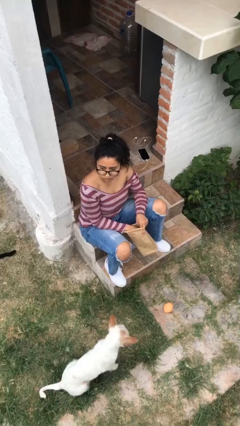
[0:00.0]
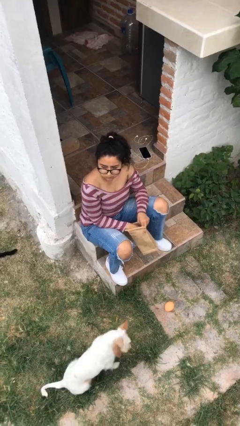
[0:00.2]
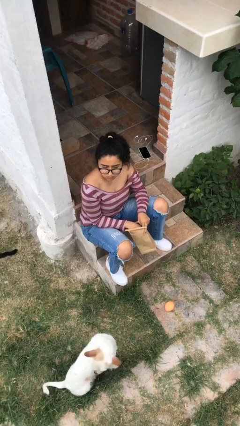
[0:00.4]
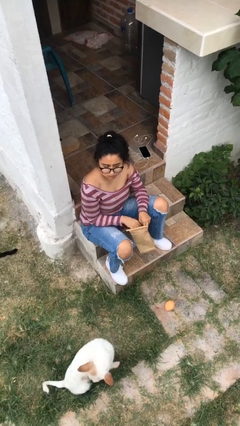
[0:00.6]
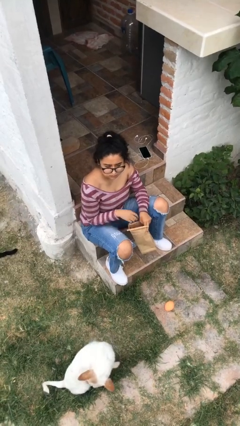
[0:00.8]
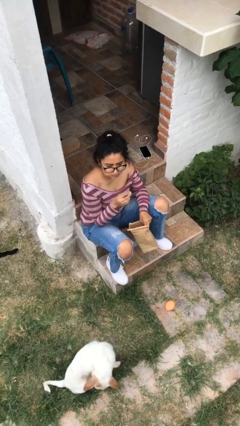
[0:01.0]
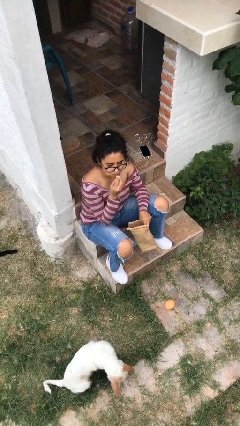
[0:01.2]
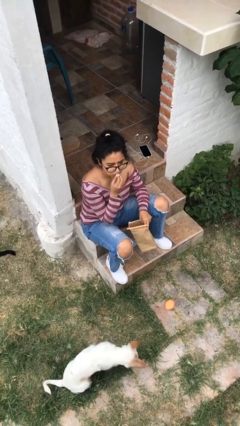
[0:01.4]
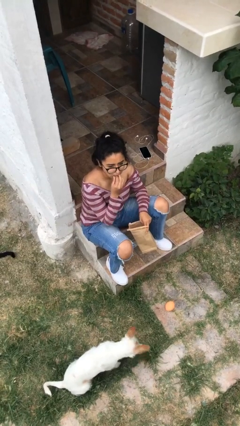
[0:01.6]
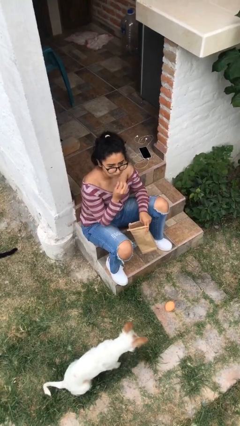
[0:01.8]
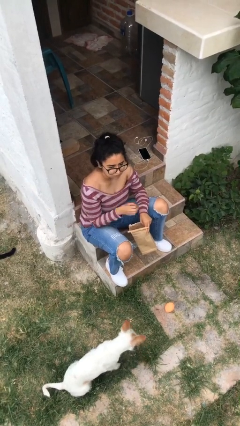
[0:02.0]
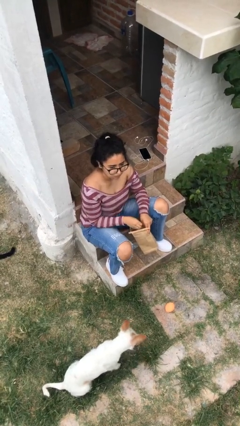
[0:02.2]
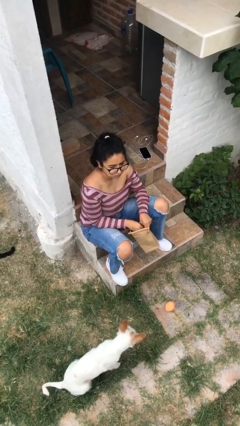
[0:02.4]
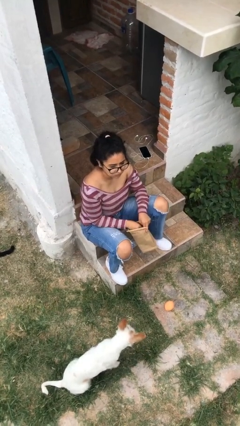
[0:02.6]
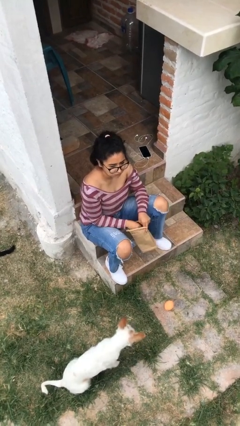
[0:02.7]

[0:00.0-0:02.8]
person eats snack from bag

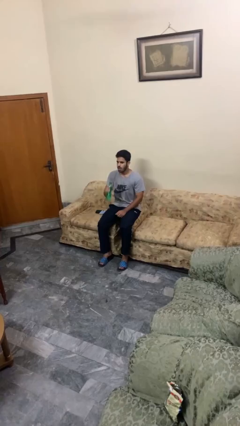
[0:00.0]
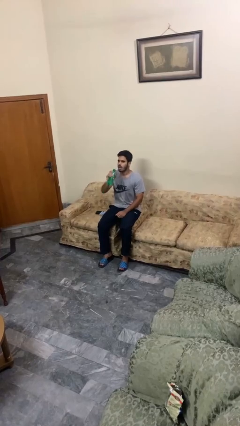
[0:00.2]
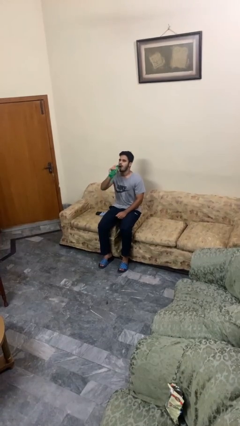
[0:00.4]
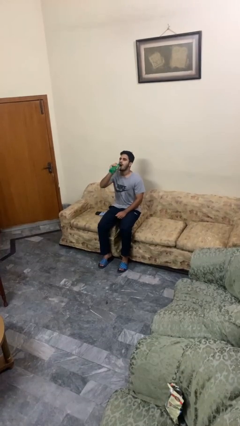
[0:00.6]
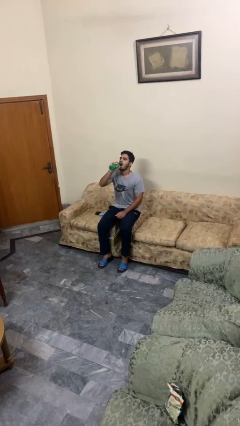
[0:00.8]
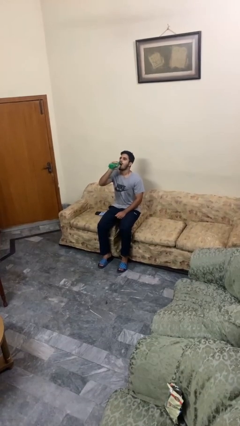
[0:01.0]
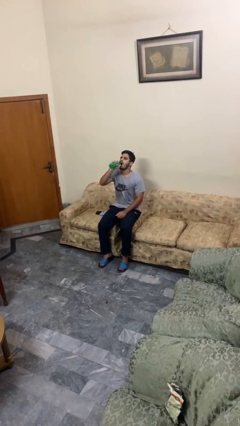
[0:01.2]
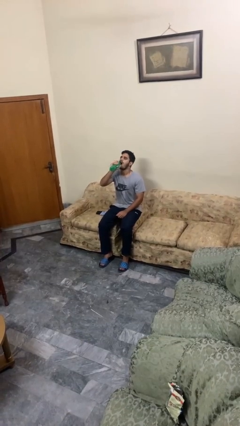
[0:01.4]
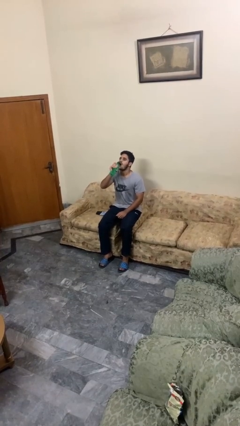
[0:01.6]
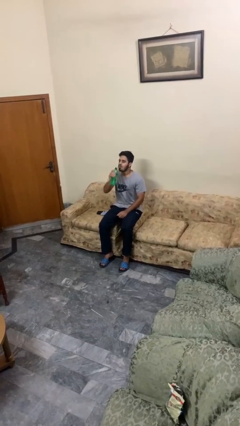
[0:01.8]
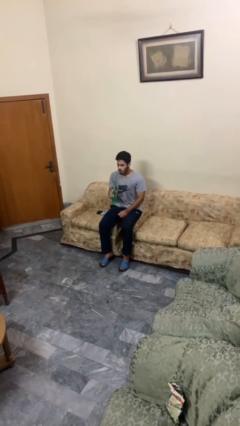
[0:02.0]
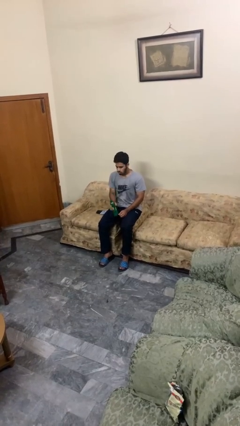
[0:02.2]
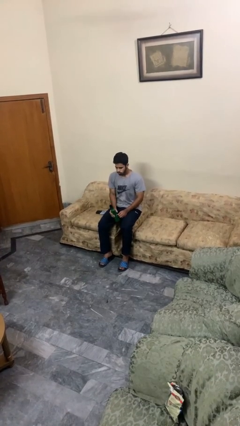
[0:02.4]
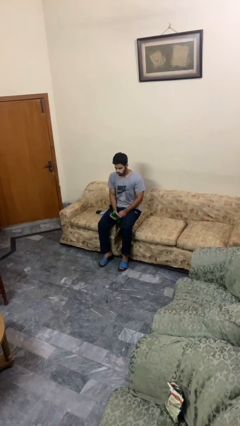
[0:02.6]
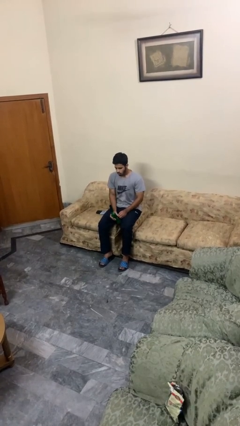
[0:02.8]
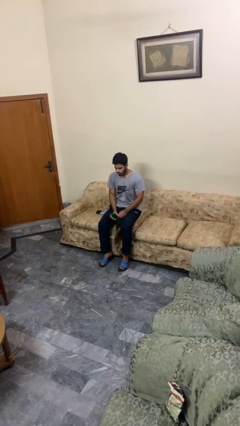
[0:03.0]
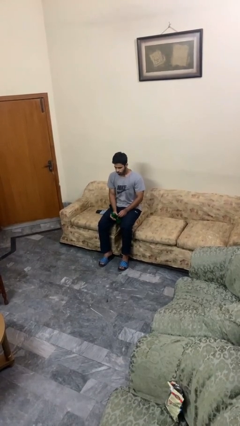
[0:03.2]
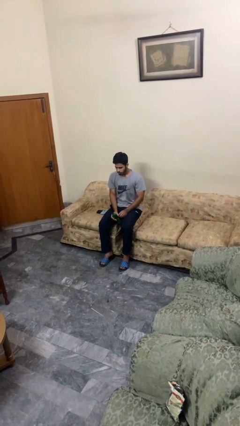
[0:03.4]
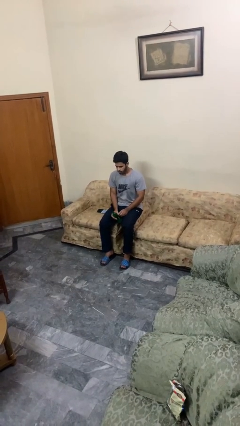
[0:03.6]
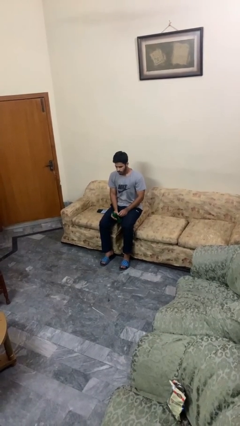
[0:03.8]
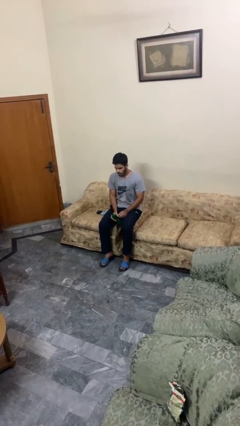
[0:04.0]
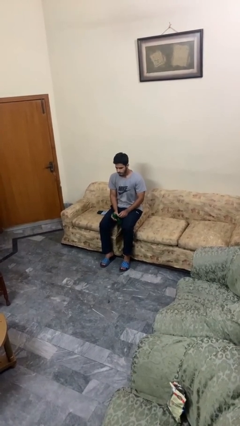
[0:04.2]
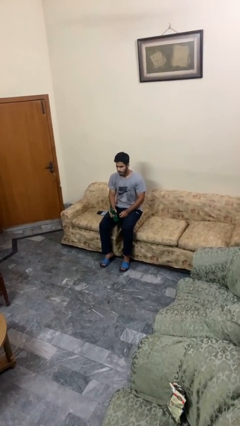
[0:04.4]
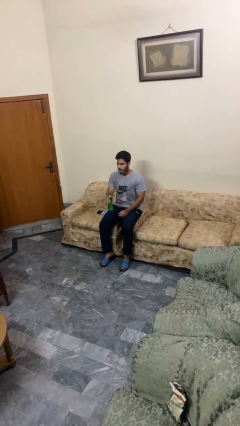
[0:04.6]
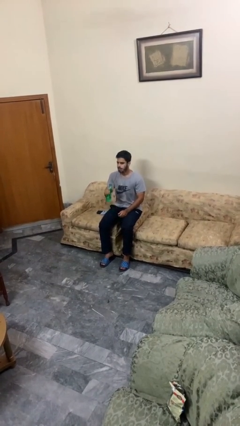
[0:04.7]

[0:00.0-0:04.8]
person drinks from bottle

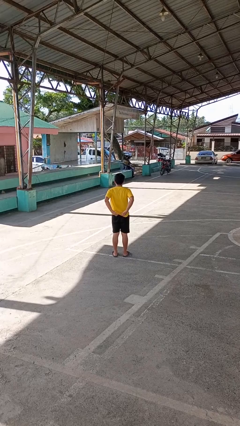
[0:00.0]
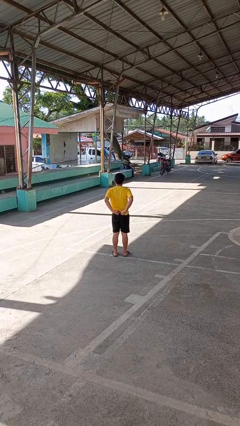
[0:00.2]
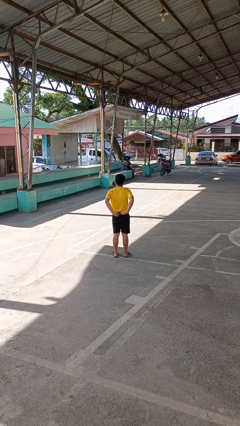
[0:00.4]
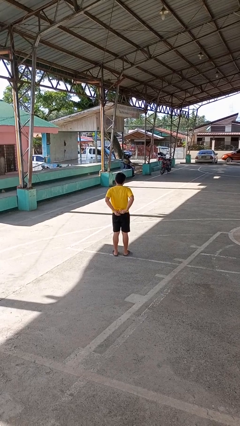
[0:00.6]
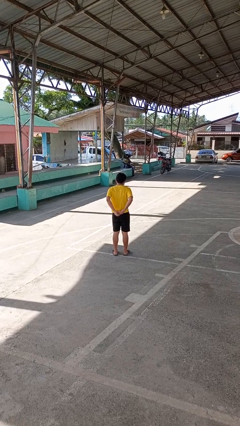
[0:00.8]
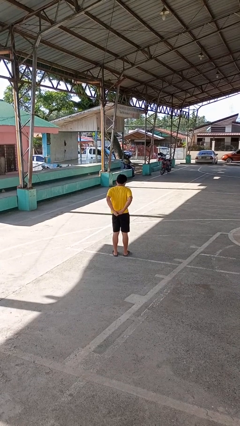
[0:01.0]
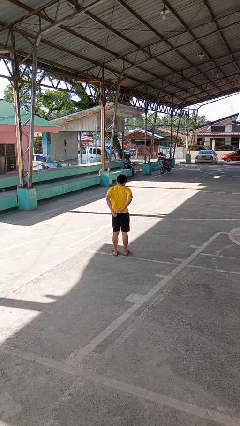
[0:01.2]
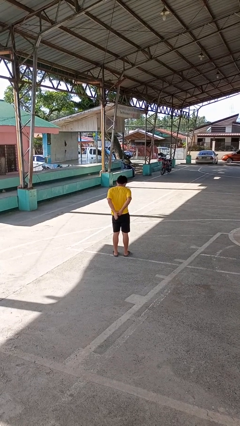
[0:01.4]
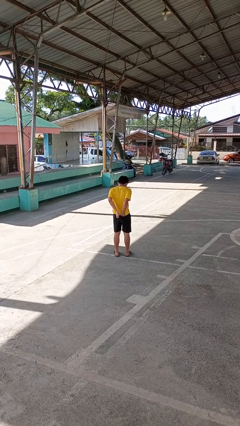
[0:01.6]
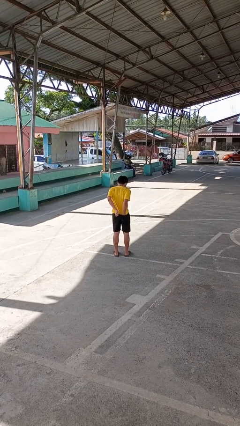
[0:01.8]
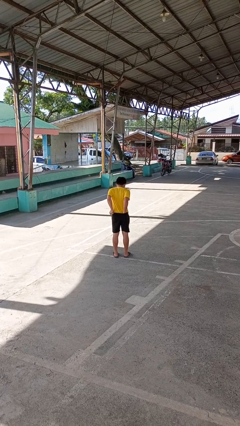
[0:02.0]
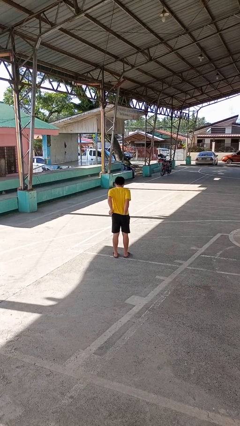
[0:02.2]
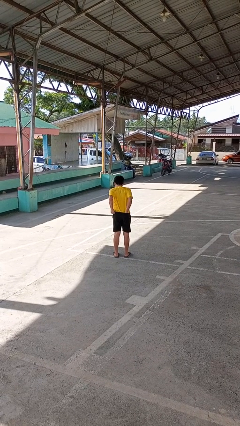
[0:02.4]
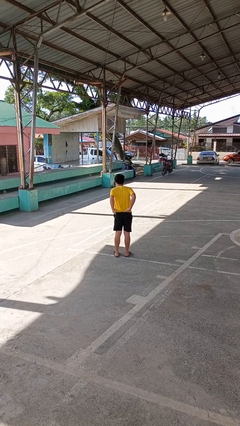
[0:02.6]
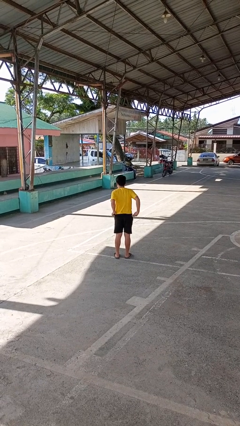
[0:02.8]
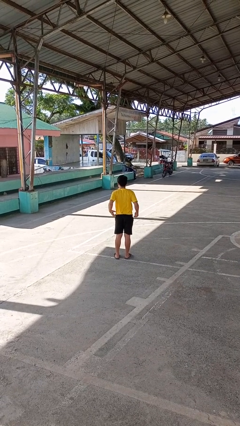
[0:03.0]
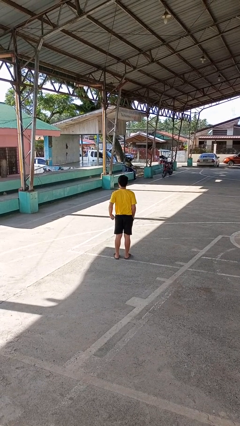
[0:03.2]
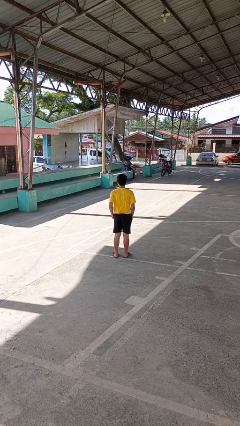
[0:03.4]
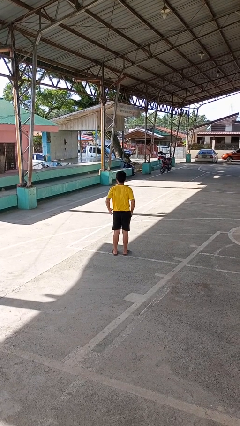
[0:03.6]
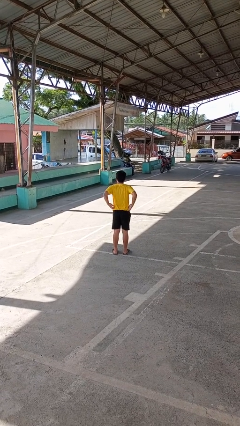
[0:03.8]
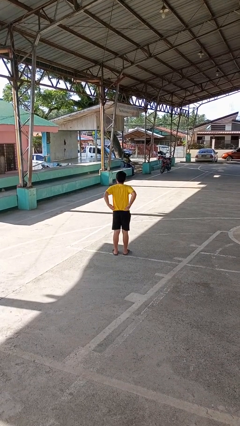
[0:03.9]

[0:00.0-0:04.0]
person tucks in shirt

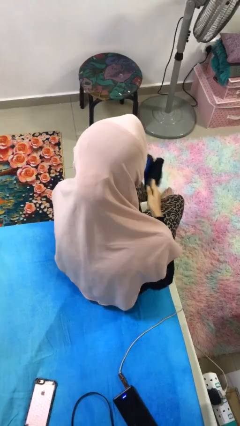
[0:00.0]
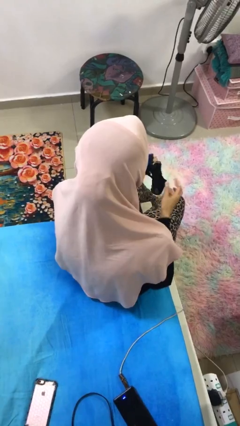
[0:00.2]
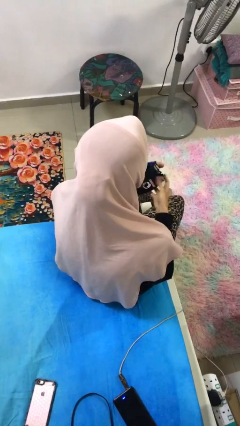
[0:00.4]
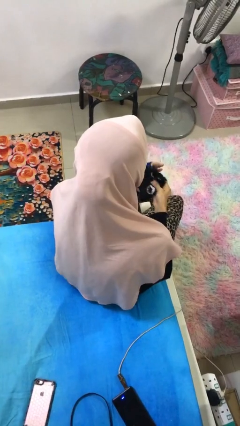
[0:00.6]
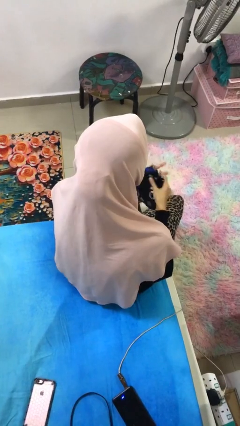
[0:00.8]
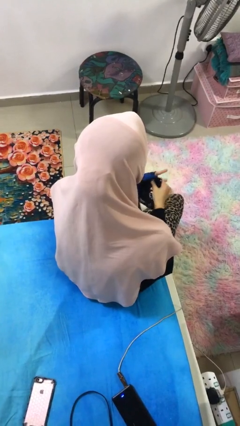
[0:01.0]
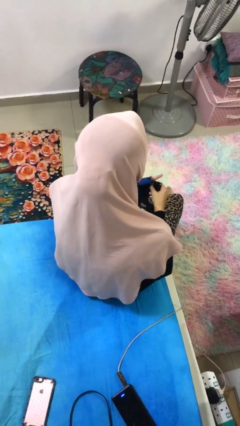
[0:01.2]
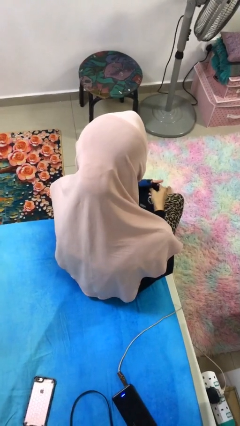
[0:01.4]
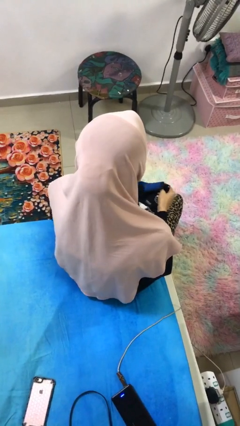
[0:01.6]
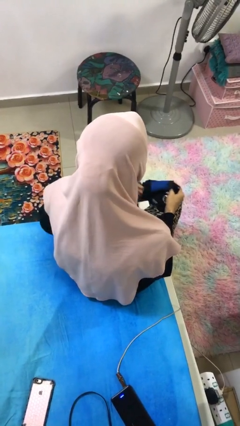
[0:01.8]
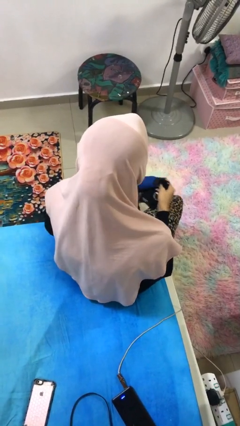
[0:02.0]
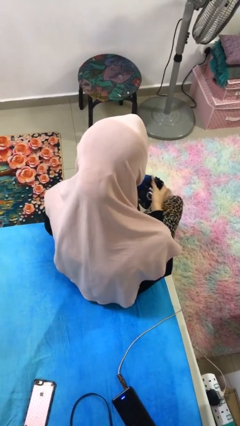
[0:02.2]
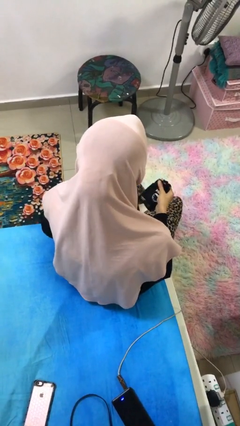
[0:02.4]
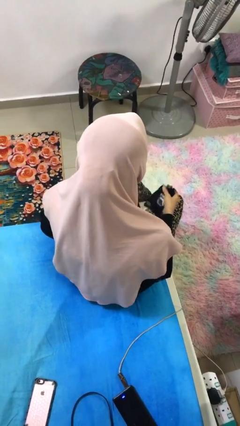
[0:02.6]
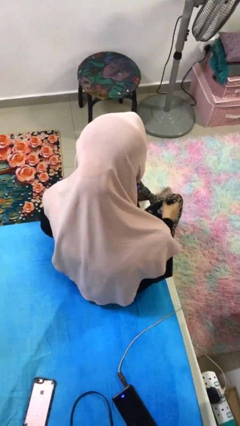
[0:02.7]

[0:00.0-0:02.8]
person takes off gloves

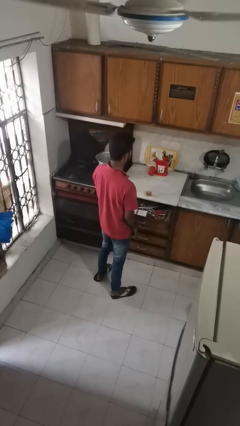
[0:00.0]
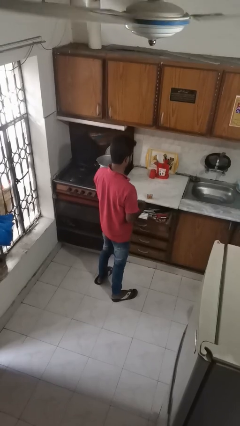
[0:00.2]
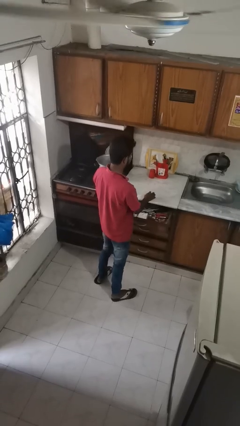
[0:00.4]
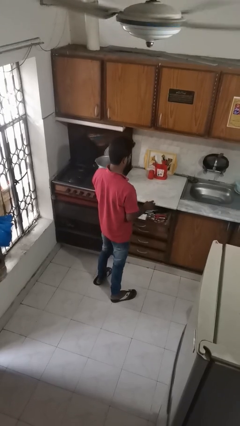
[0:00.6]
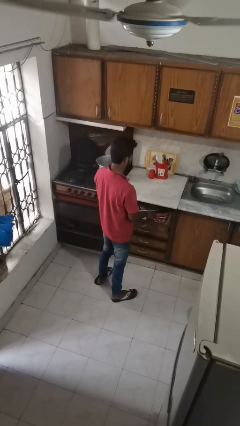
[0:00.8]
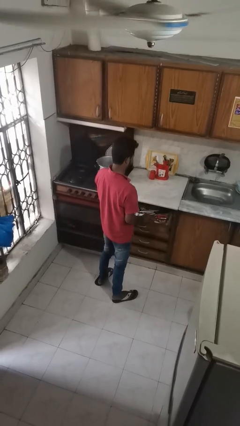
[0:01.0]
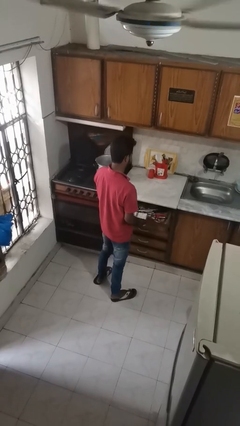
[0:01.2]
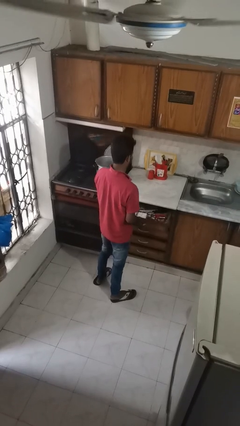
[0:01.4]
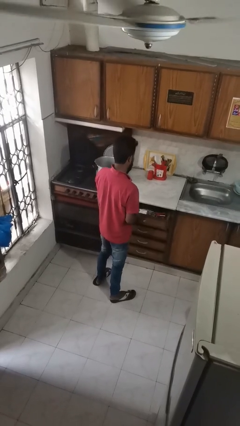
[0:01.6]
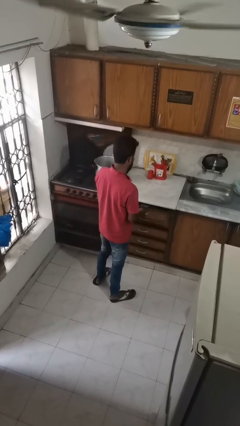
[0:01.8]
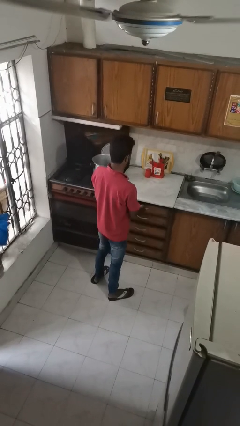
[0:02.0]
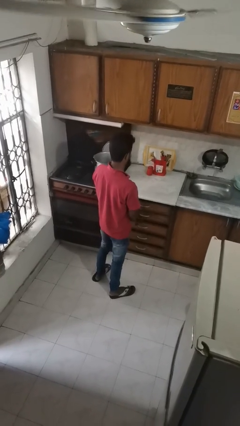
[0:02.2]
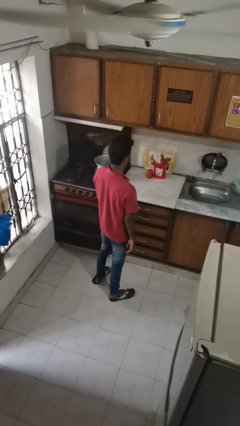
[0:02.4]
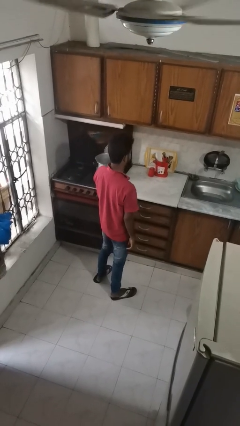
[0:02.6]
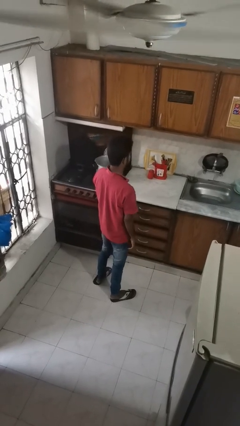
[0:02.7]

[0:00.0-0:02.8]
person puts object into kitchen drawer

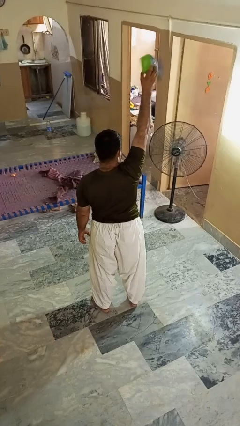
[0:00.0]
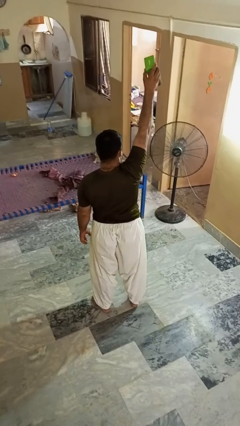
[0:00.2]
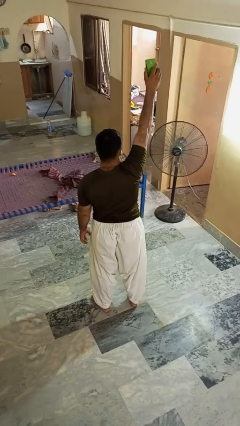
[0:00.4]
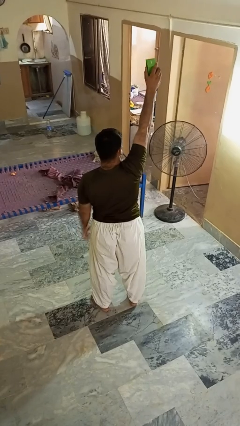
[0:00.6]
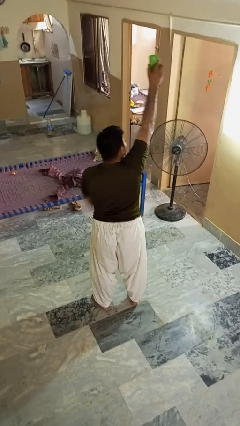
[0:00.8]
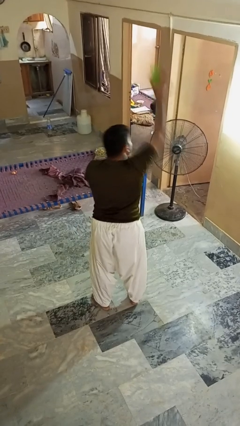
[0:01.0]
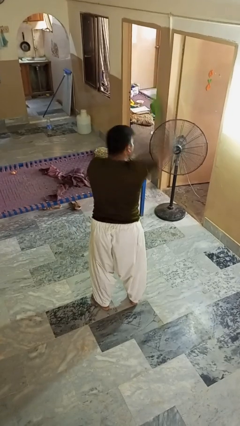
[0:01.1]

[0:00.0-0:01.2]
person drops object
